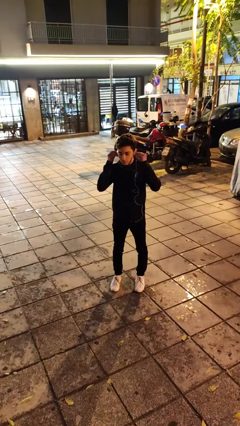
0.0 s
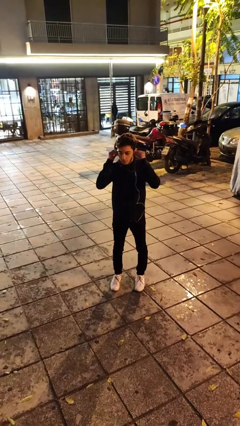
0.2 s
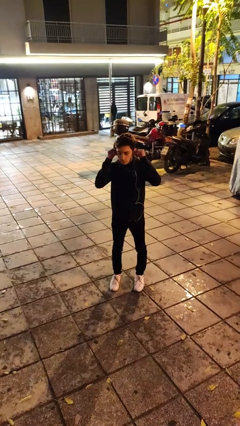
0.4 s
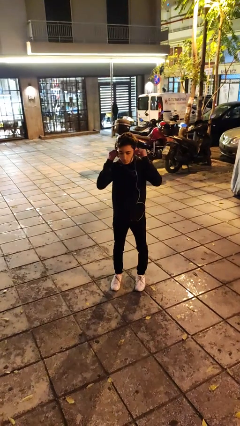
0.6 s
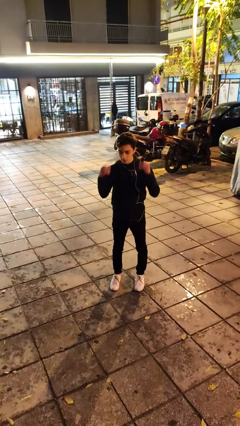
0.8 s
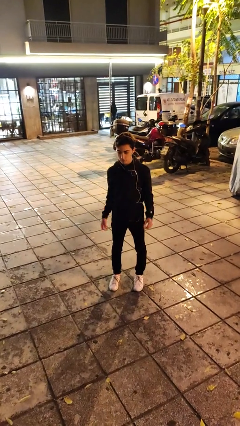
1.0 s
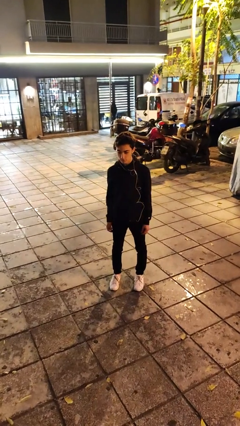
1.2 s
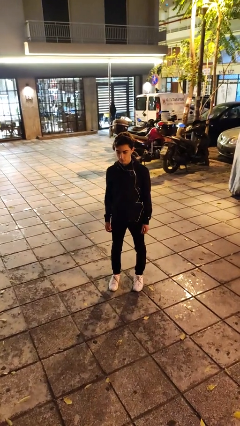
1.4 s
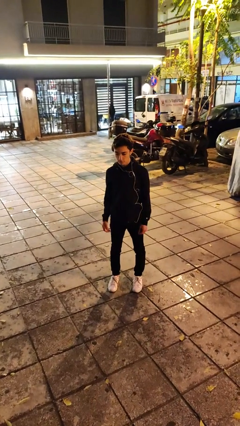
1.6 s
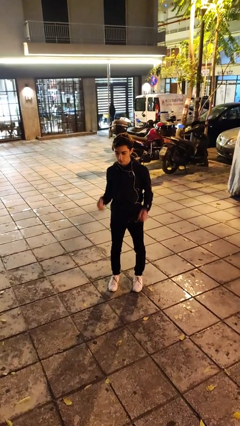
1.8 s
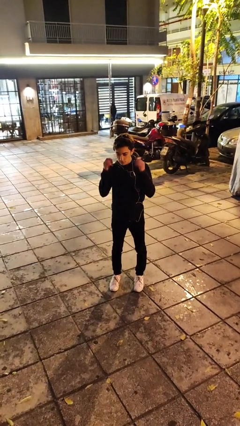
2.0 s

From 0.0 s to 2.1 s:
person puts on headphones

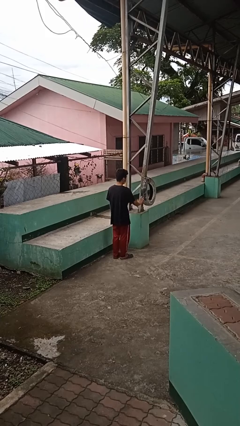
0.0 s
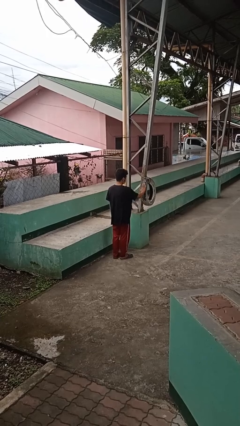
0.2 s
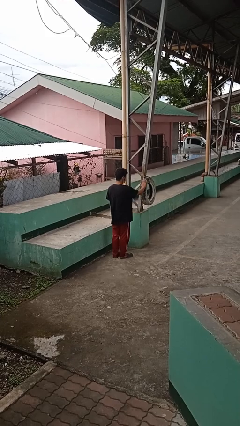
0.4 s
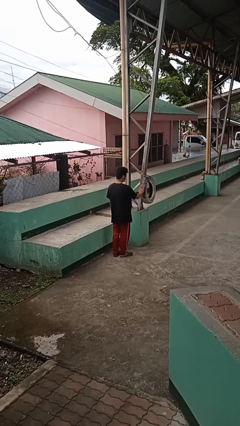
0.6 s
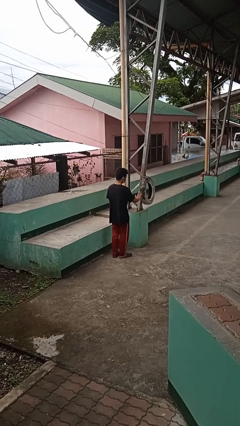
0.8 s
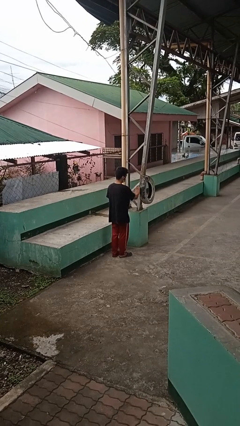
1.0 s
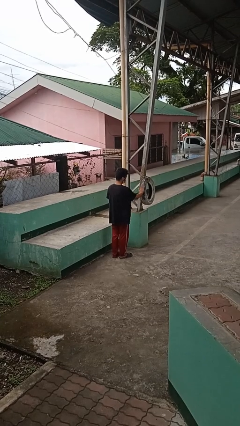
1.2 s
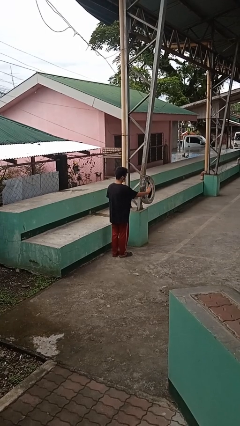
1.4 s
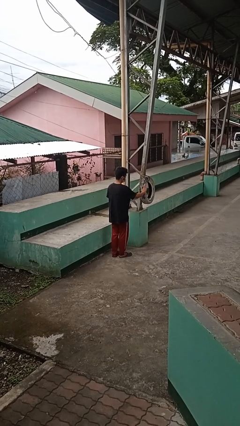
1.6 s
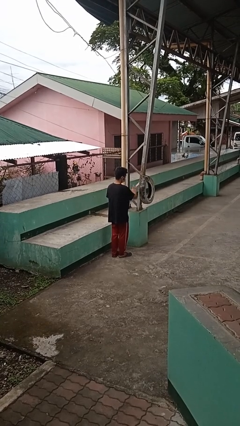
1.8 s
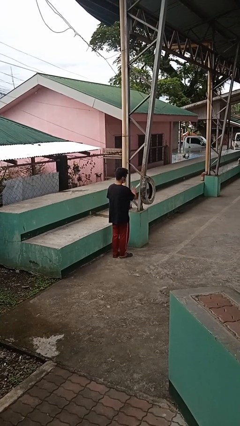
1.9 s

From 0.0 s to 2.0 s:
person waves hand over object

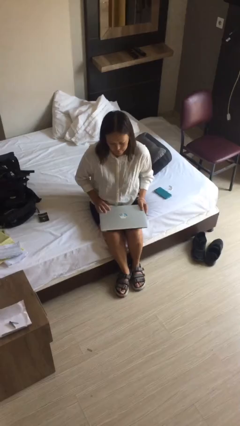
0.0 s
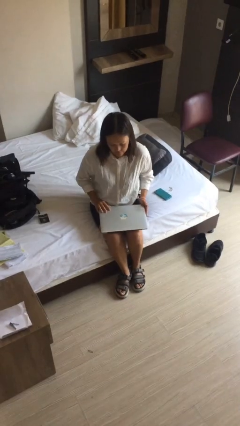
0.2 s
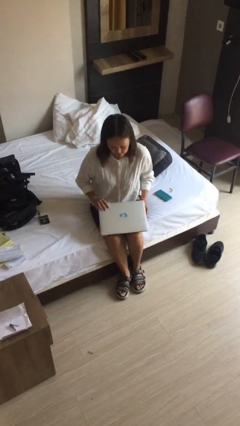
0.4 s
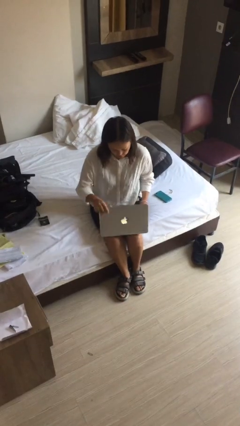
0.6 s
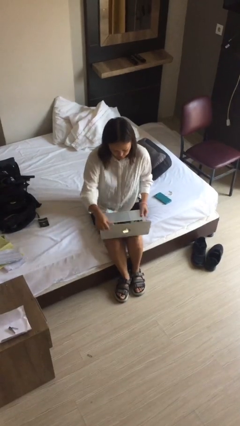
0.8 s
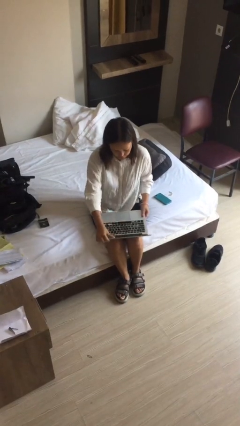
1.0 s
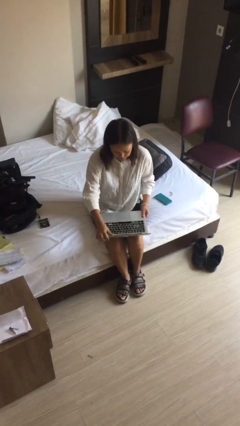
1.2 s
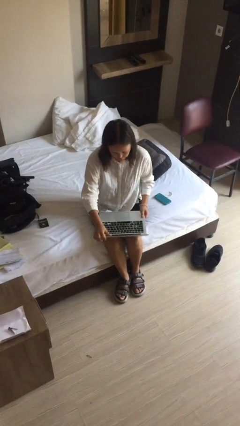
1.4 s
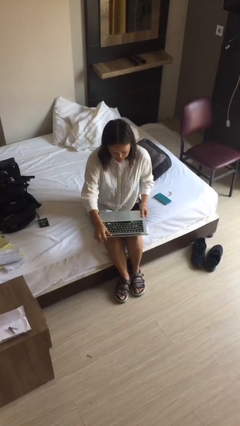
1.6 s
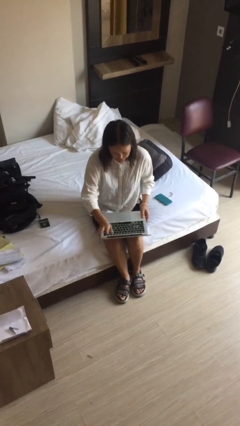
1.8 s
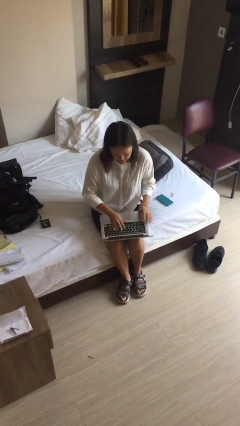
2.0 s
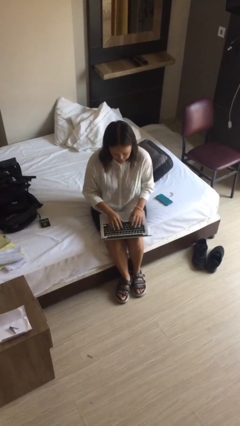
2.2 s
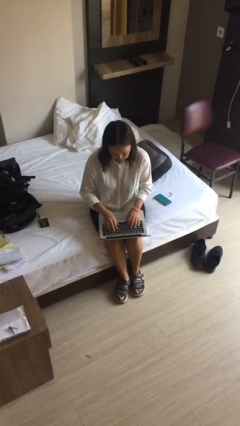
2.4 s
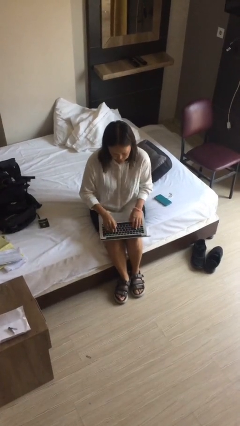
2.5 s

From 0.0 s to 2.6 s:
person opens laptop

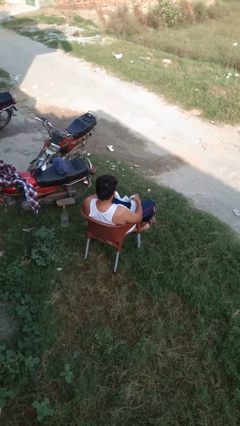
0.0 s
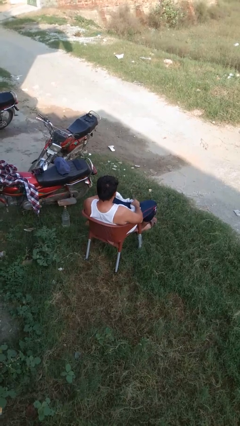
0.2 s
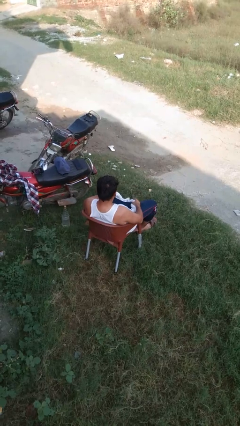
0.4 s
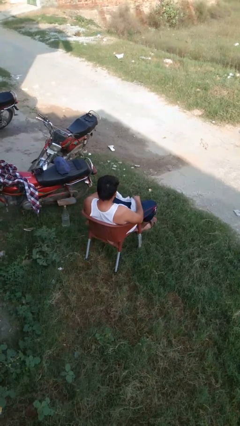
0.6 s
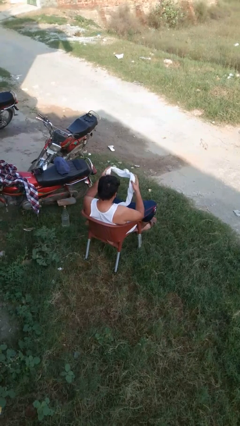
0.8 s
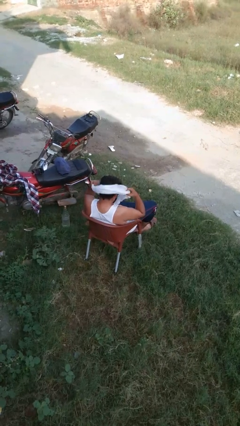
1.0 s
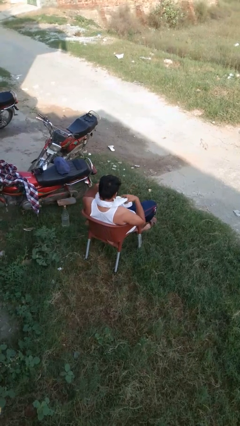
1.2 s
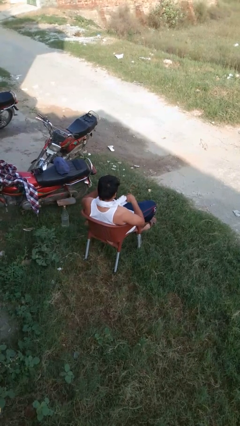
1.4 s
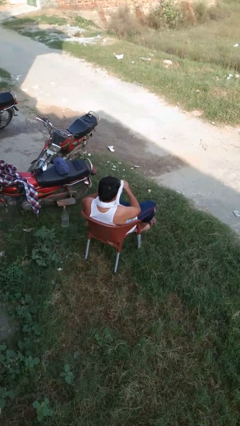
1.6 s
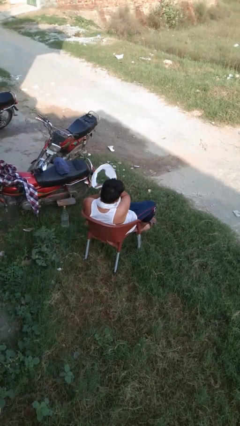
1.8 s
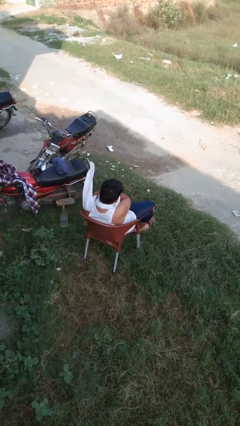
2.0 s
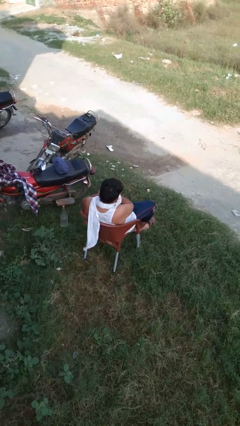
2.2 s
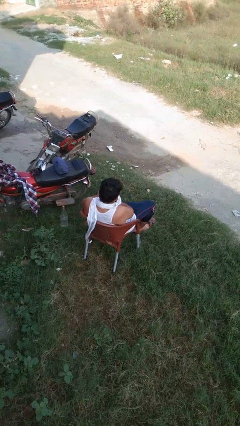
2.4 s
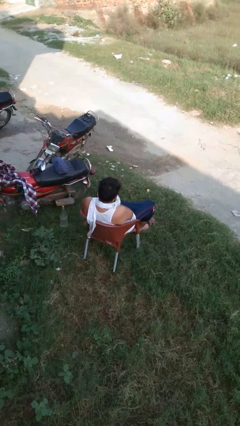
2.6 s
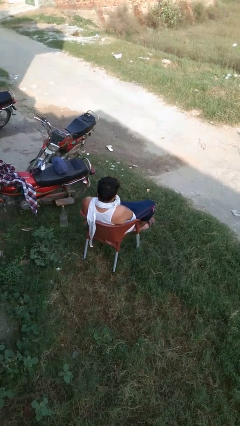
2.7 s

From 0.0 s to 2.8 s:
person puts on scarf

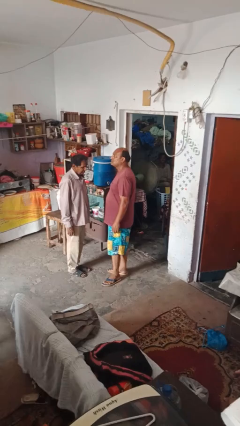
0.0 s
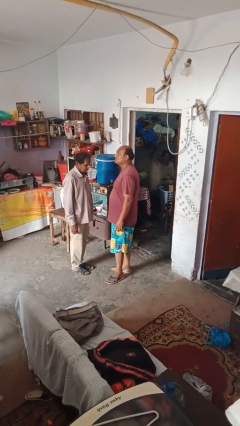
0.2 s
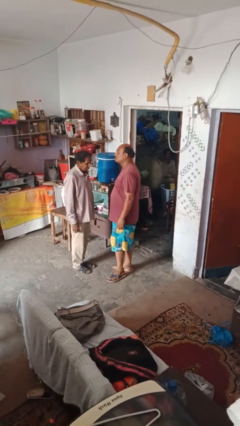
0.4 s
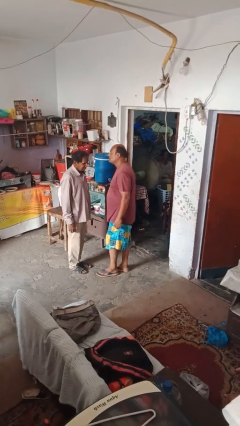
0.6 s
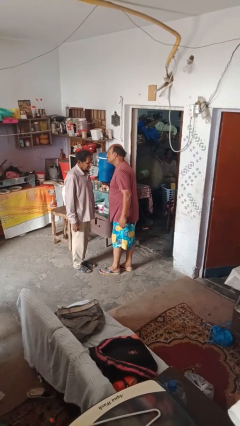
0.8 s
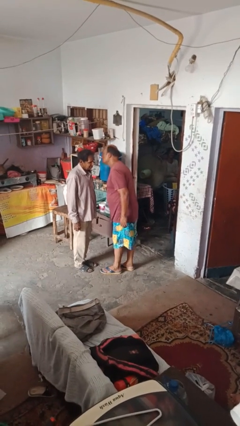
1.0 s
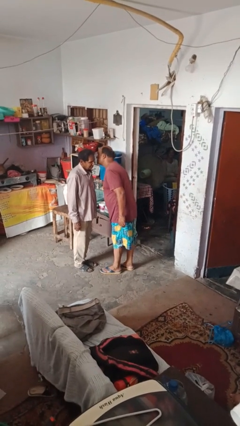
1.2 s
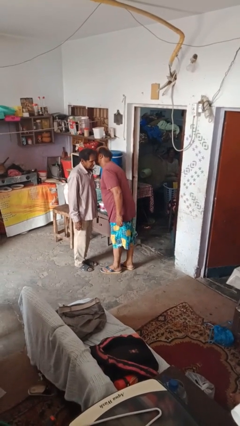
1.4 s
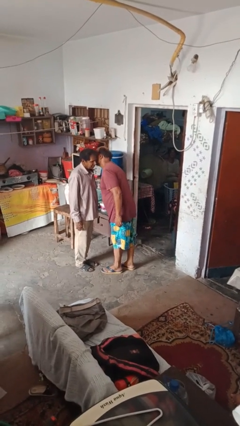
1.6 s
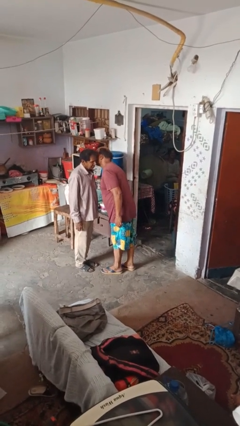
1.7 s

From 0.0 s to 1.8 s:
person kisses cheek of person

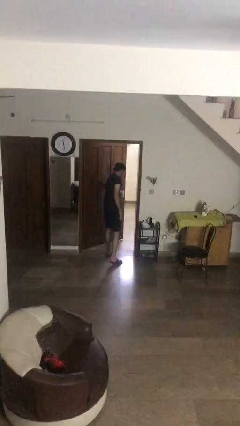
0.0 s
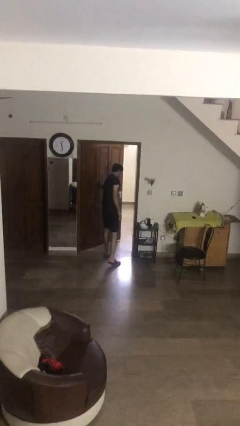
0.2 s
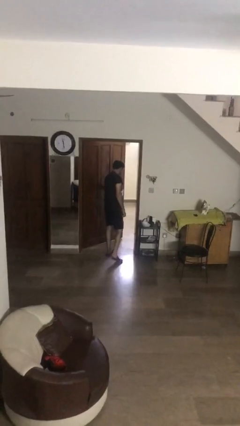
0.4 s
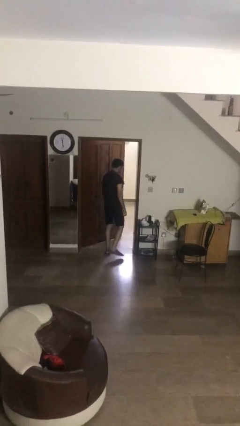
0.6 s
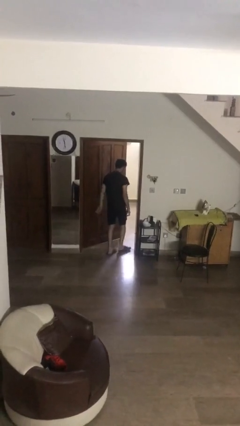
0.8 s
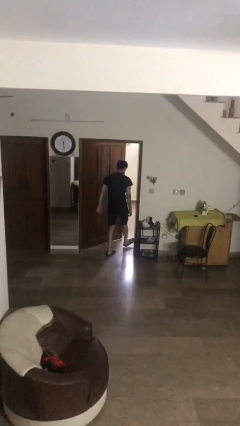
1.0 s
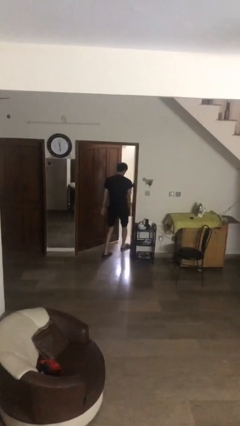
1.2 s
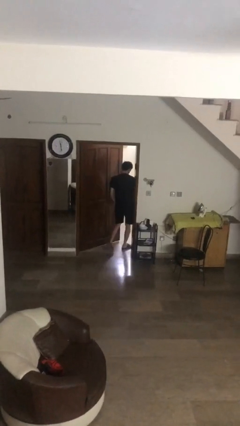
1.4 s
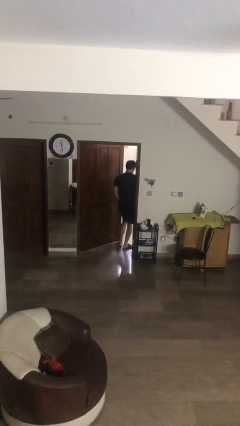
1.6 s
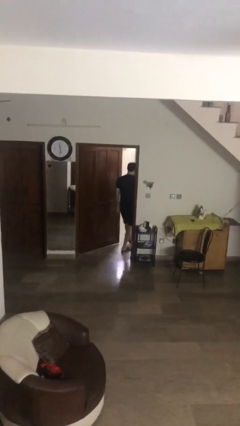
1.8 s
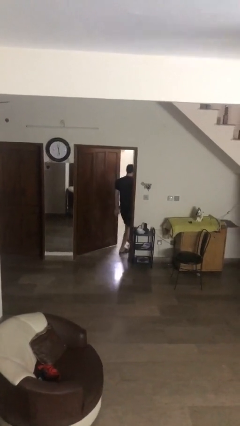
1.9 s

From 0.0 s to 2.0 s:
person exits scene through structure

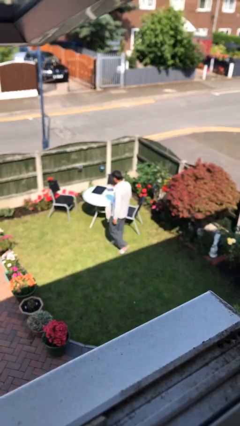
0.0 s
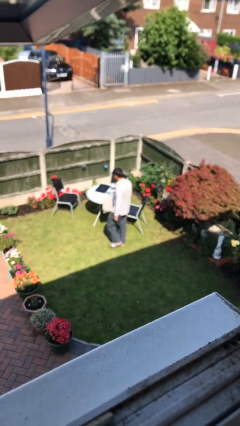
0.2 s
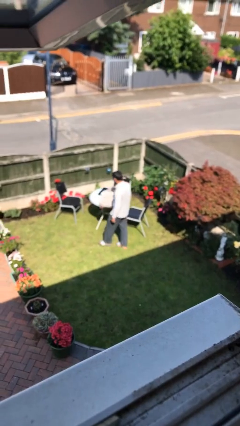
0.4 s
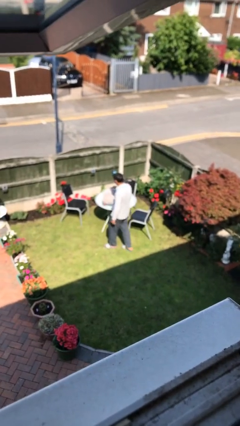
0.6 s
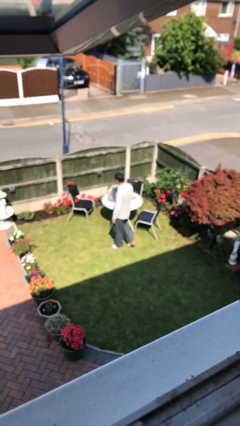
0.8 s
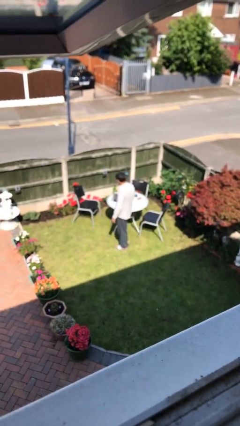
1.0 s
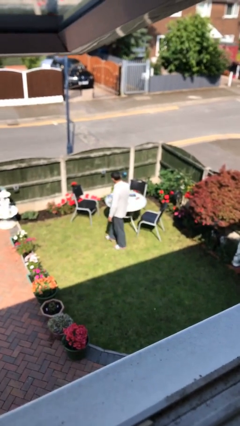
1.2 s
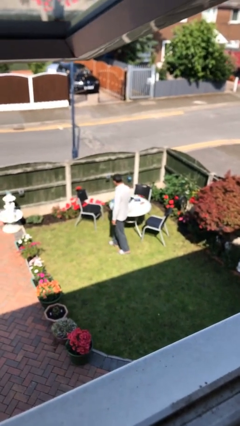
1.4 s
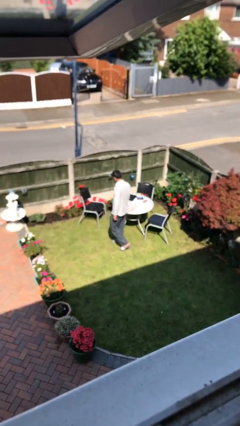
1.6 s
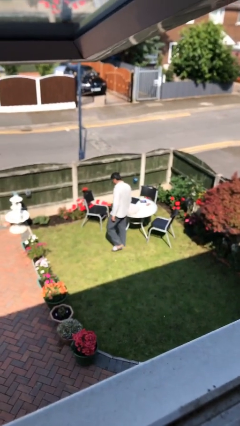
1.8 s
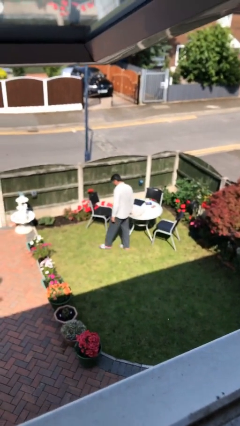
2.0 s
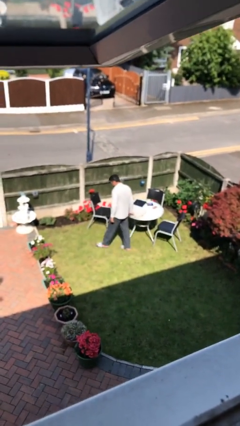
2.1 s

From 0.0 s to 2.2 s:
person puts down object on table

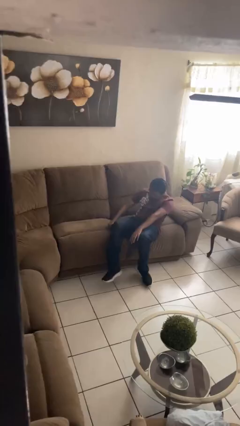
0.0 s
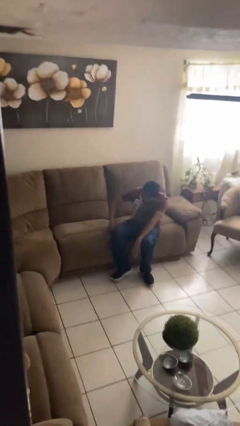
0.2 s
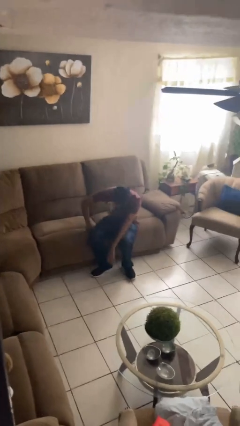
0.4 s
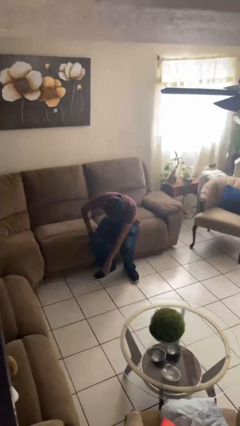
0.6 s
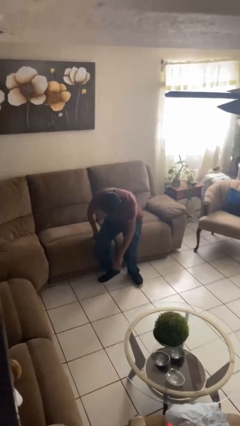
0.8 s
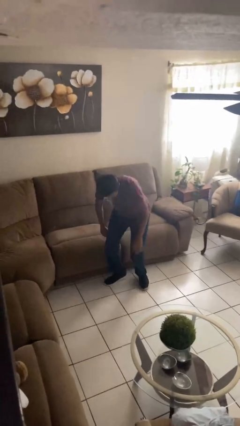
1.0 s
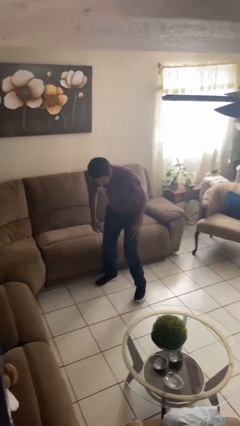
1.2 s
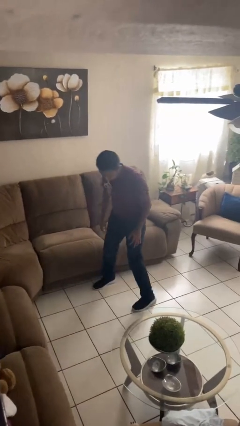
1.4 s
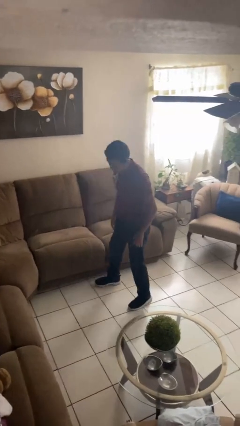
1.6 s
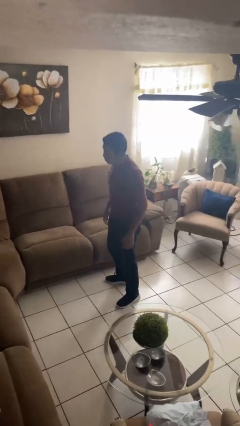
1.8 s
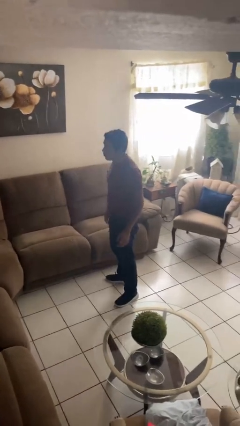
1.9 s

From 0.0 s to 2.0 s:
person stands up
